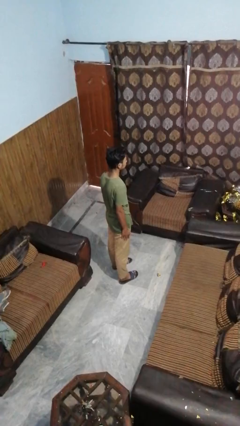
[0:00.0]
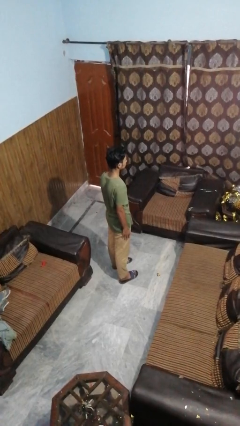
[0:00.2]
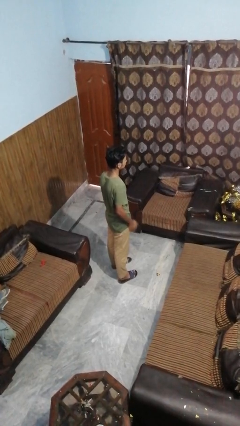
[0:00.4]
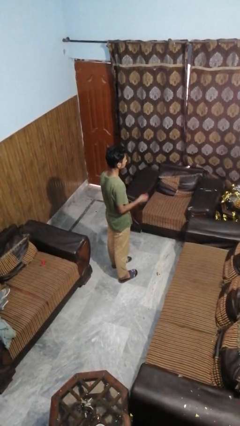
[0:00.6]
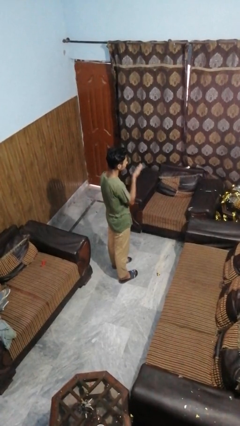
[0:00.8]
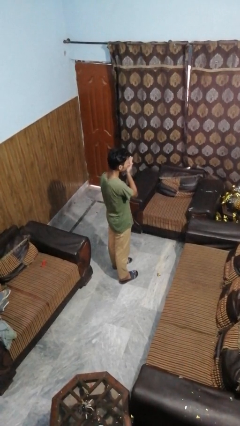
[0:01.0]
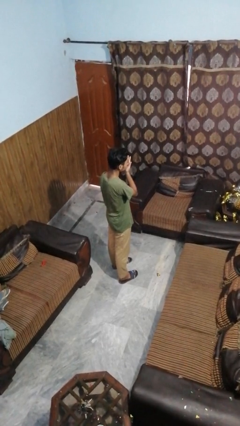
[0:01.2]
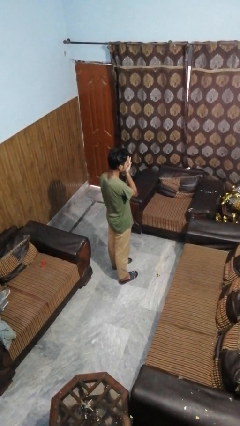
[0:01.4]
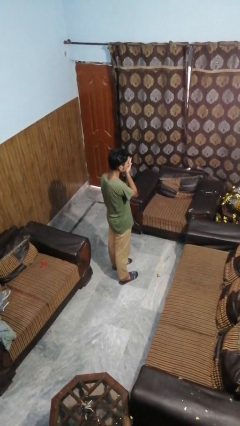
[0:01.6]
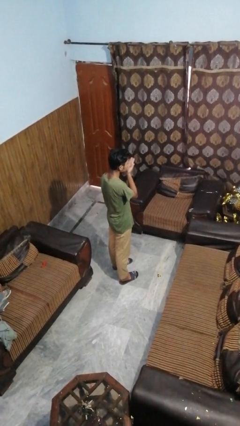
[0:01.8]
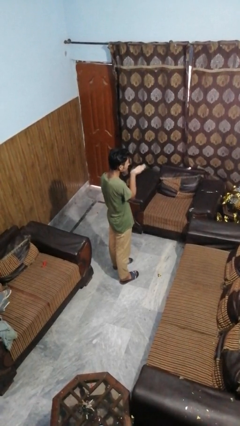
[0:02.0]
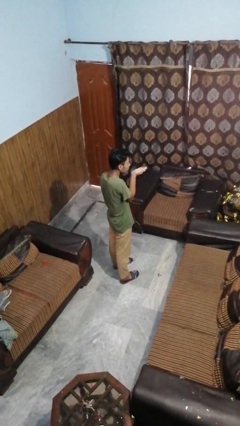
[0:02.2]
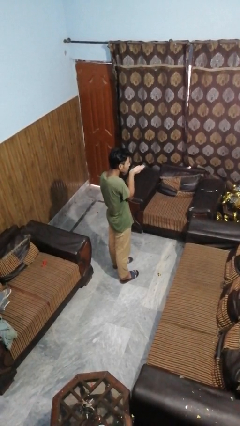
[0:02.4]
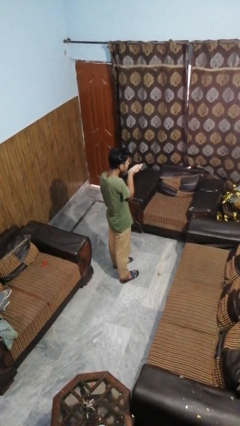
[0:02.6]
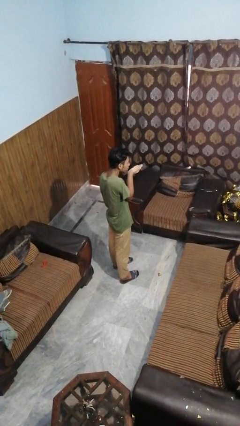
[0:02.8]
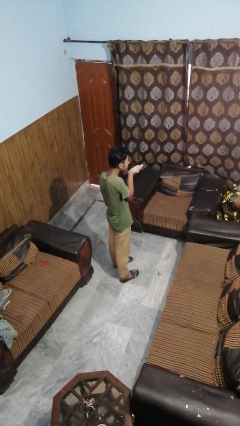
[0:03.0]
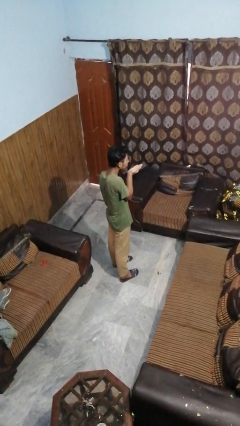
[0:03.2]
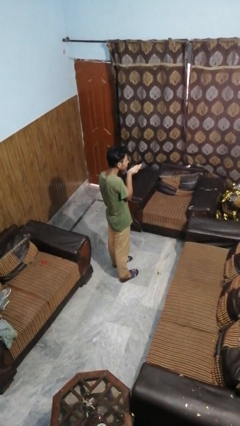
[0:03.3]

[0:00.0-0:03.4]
person gestures blow kiss

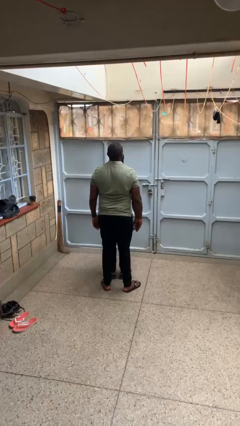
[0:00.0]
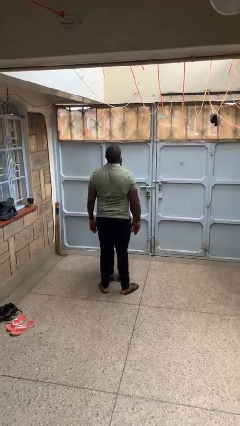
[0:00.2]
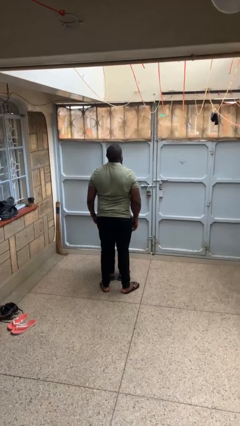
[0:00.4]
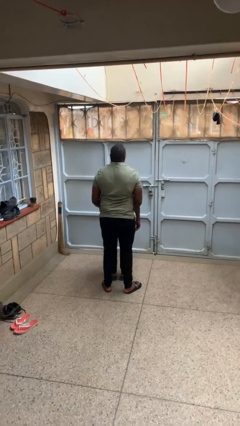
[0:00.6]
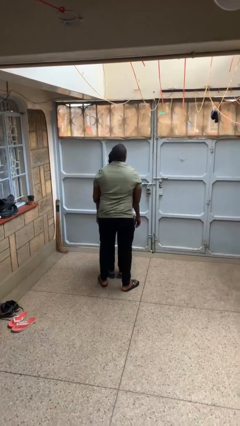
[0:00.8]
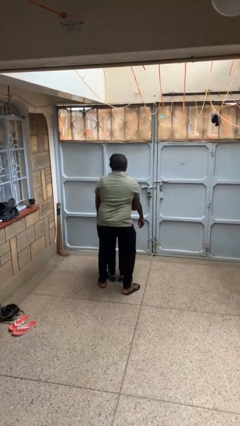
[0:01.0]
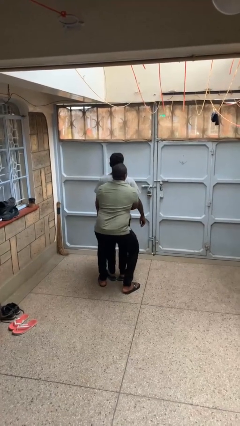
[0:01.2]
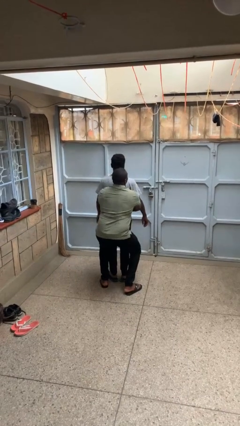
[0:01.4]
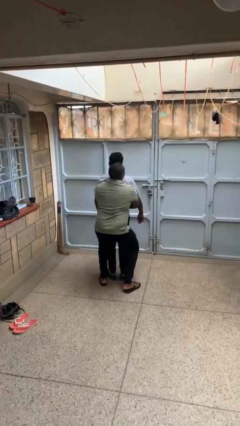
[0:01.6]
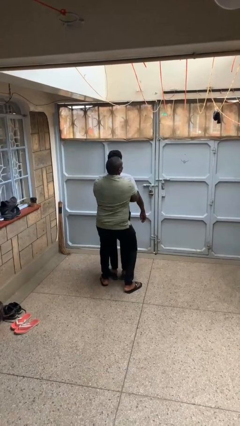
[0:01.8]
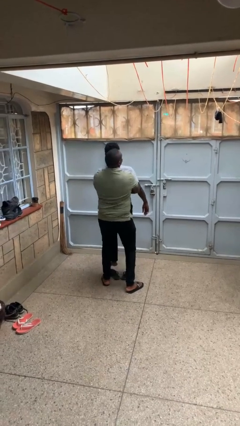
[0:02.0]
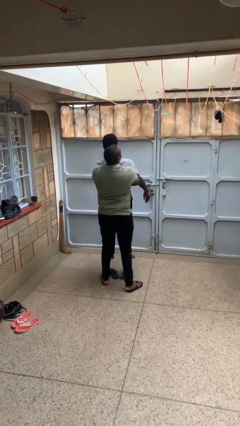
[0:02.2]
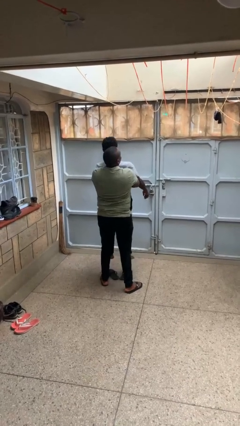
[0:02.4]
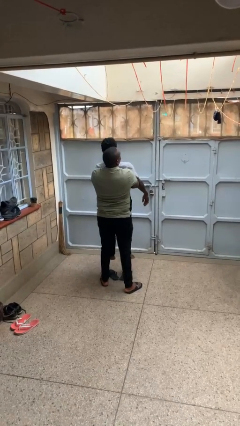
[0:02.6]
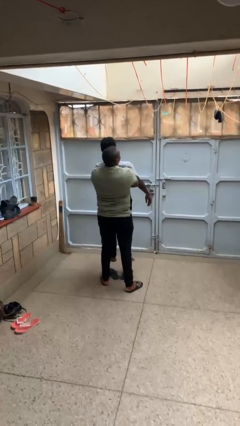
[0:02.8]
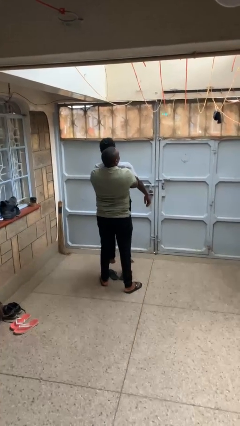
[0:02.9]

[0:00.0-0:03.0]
person picks up person

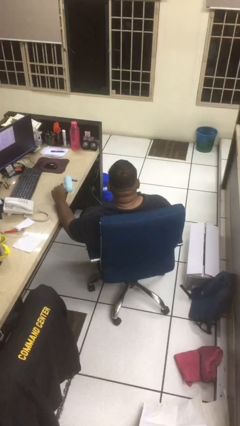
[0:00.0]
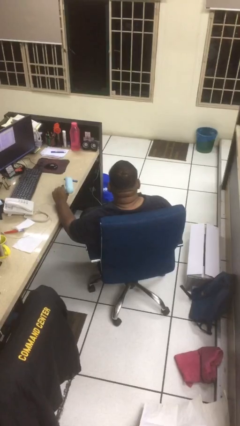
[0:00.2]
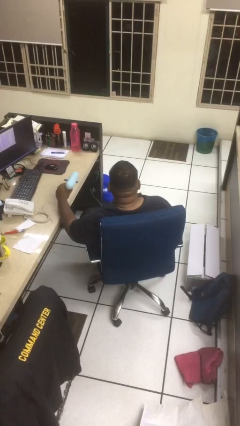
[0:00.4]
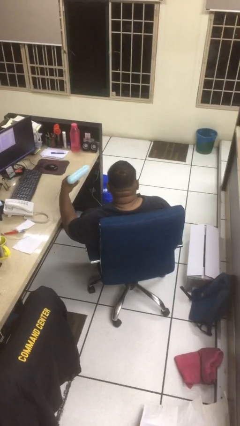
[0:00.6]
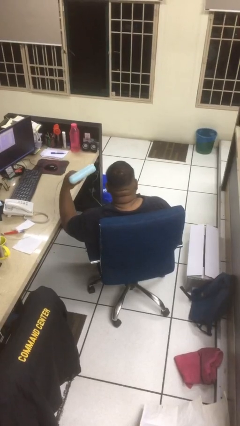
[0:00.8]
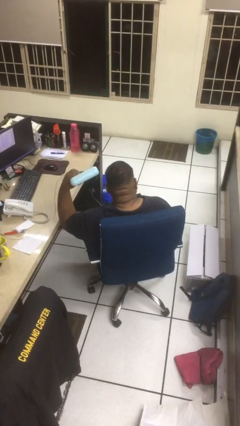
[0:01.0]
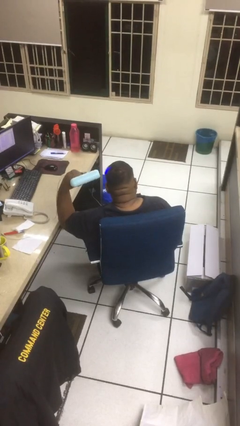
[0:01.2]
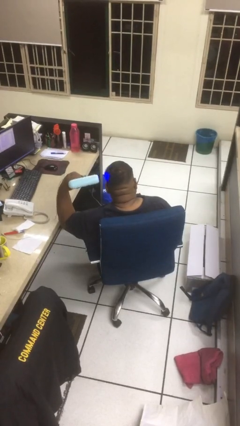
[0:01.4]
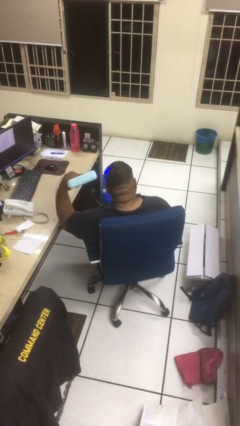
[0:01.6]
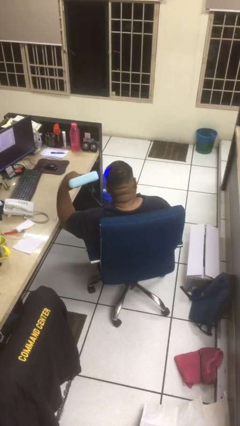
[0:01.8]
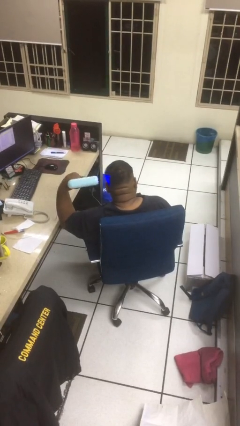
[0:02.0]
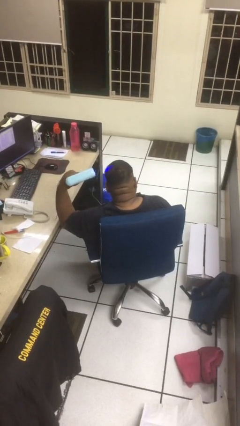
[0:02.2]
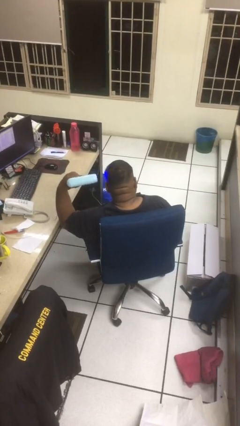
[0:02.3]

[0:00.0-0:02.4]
person dries hair with hairdryer

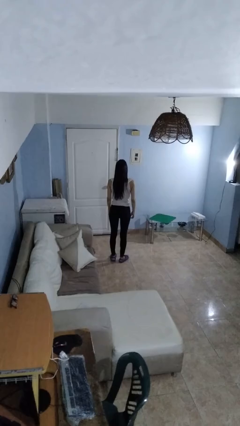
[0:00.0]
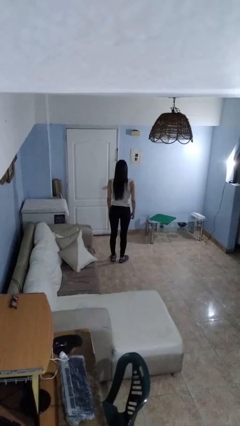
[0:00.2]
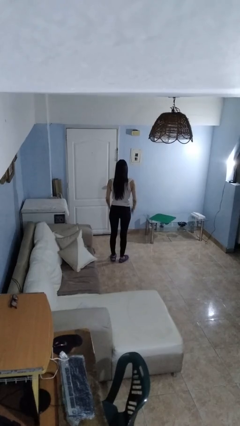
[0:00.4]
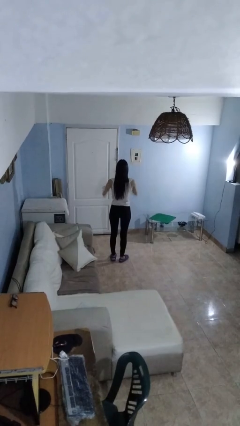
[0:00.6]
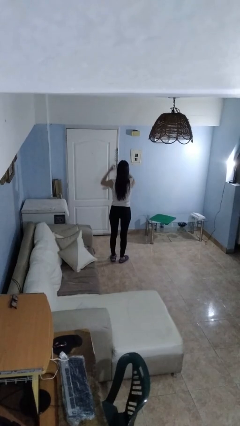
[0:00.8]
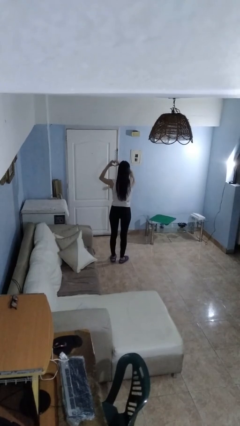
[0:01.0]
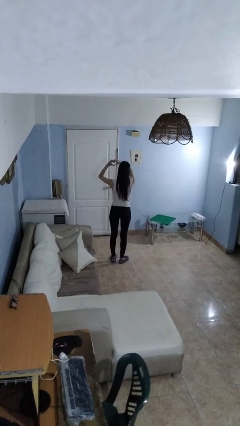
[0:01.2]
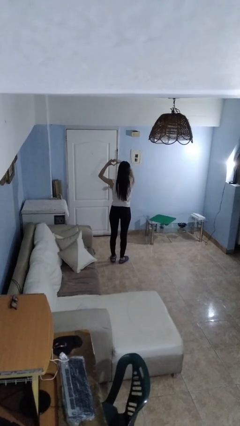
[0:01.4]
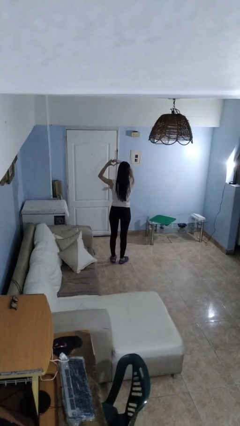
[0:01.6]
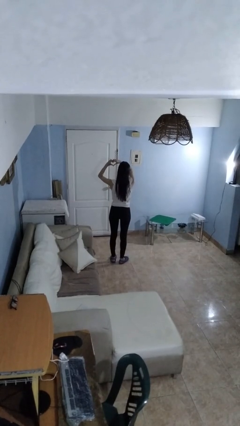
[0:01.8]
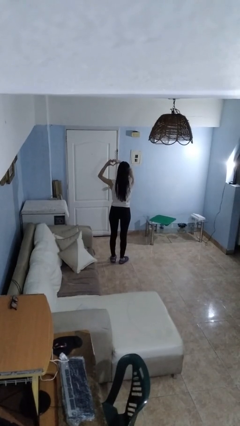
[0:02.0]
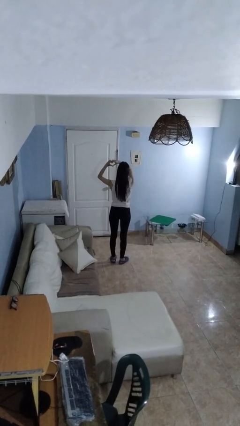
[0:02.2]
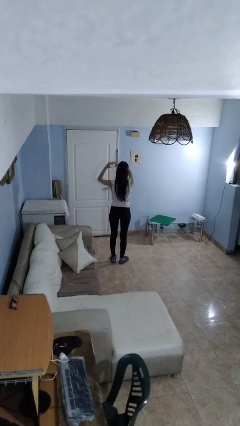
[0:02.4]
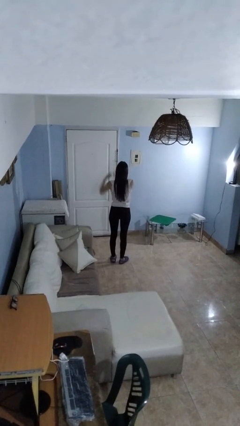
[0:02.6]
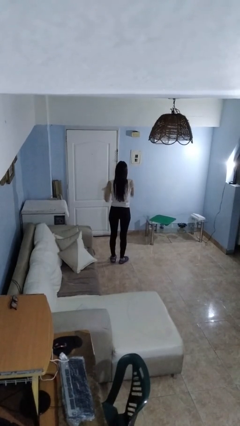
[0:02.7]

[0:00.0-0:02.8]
person gestures heart

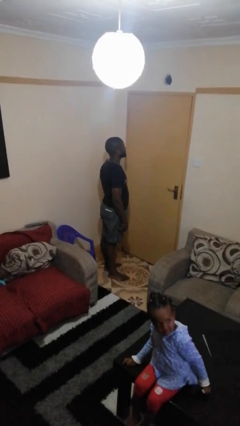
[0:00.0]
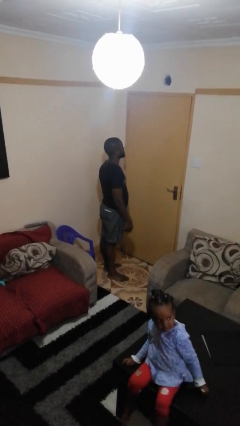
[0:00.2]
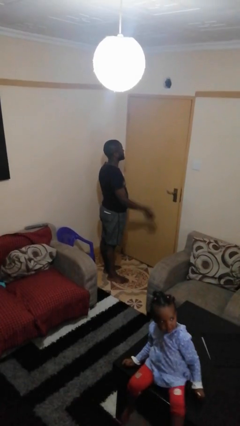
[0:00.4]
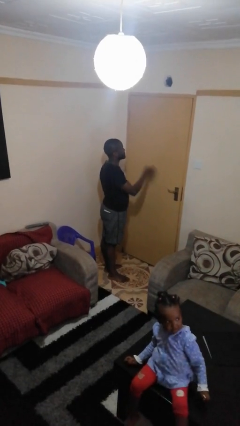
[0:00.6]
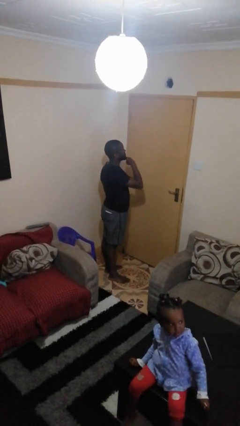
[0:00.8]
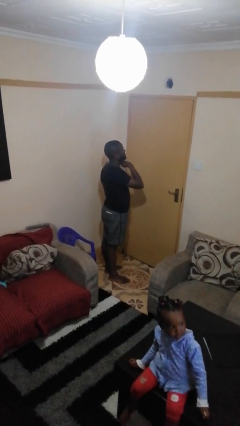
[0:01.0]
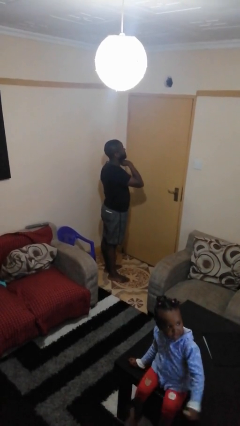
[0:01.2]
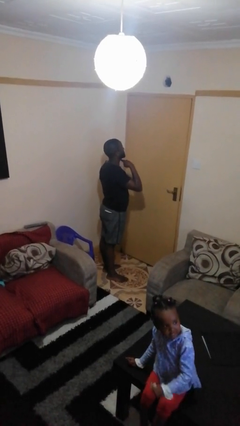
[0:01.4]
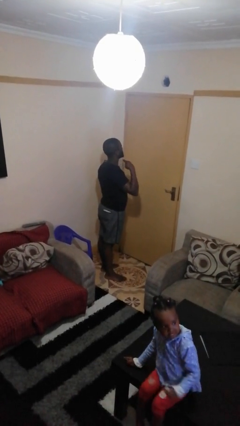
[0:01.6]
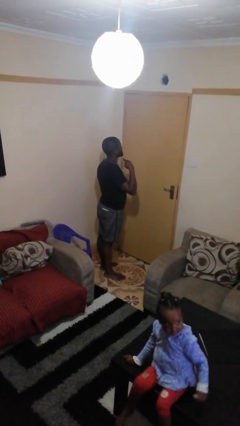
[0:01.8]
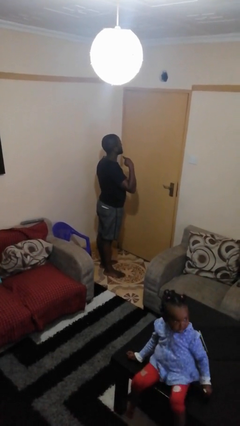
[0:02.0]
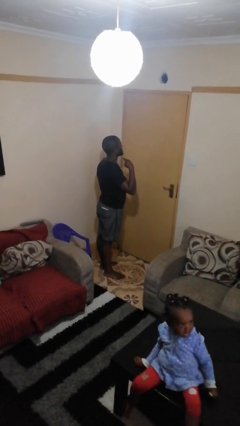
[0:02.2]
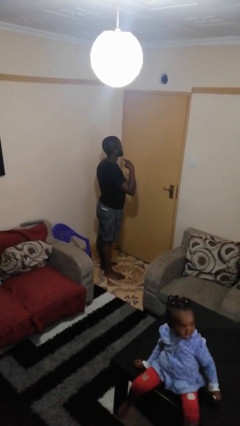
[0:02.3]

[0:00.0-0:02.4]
person gestures cut

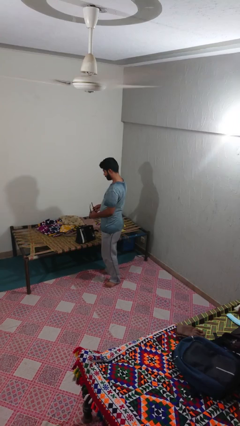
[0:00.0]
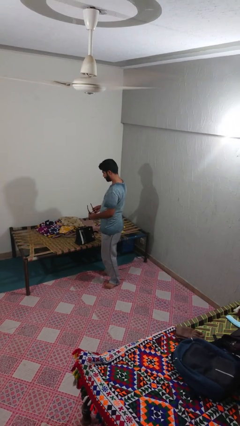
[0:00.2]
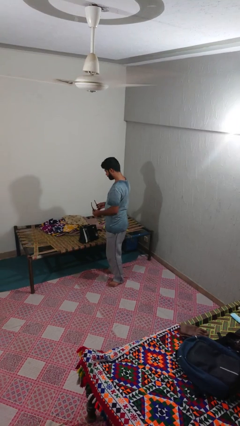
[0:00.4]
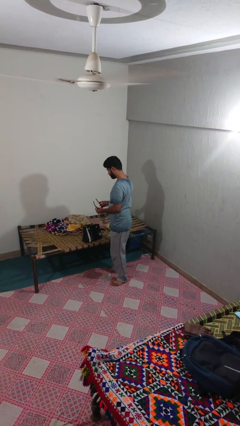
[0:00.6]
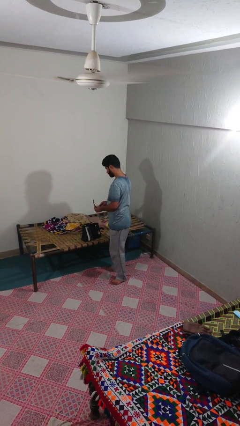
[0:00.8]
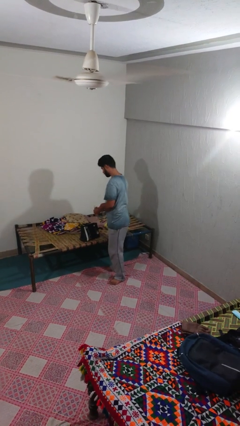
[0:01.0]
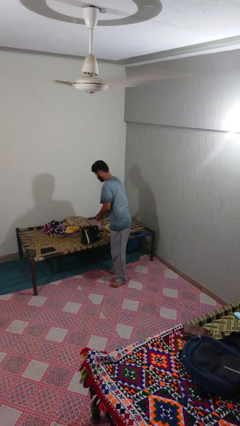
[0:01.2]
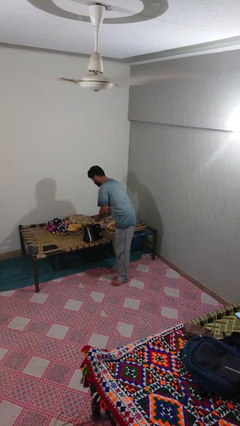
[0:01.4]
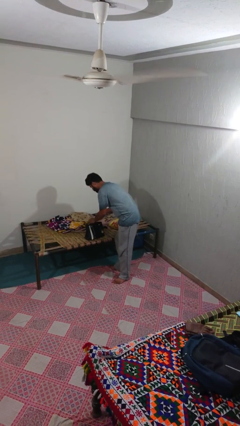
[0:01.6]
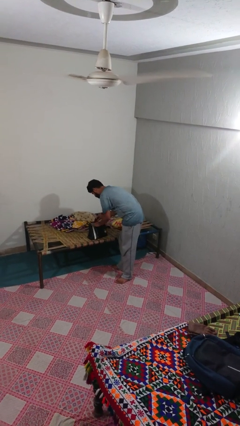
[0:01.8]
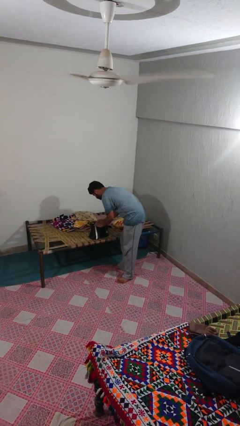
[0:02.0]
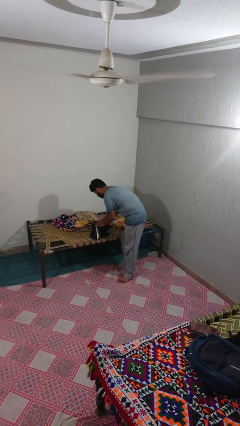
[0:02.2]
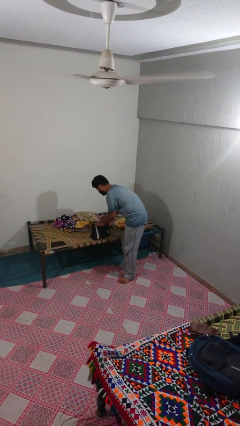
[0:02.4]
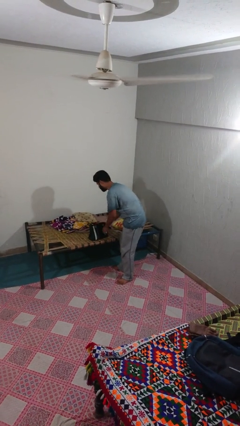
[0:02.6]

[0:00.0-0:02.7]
person puts object into purse

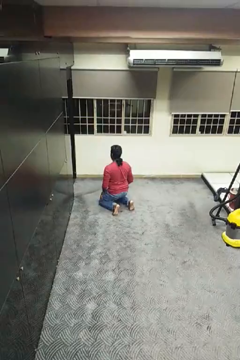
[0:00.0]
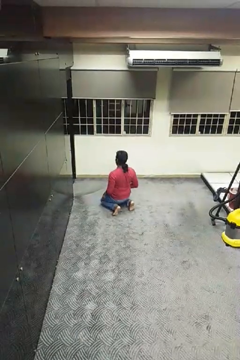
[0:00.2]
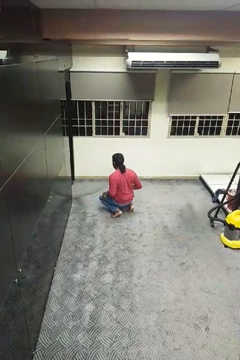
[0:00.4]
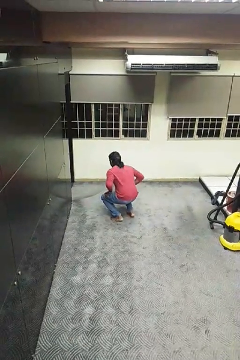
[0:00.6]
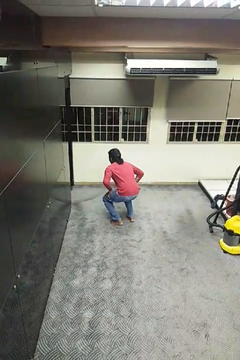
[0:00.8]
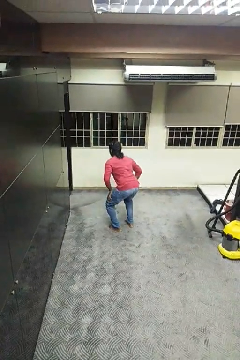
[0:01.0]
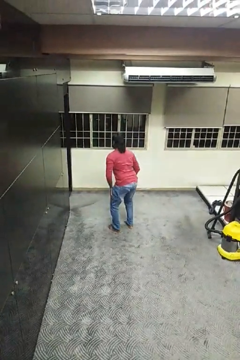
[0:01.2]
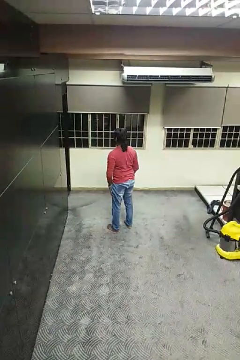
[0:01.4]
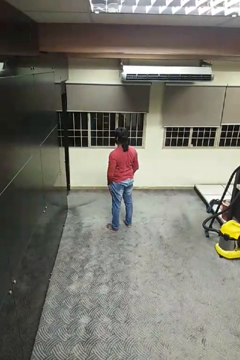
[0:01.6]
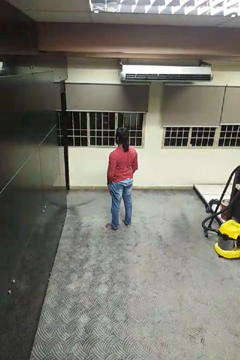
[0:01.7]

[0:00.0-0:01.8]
person stands up from floor
